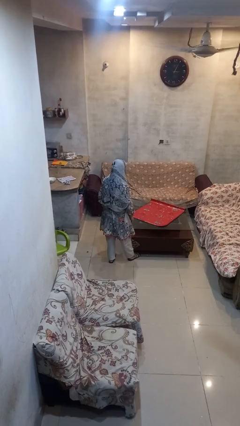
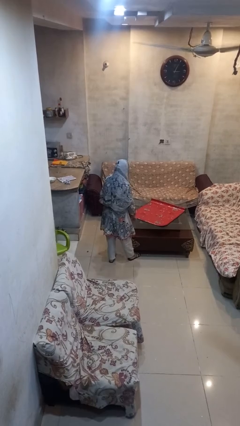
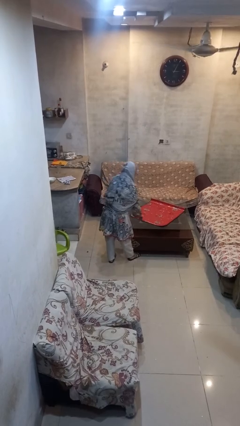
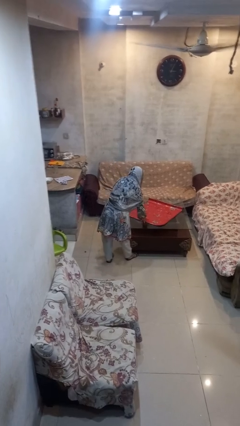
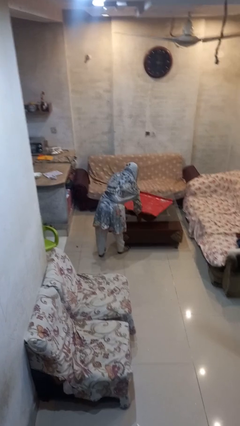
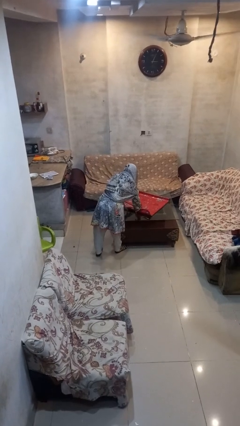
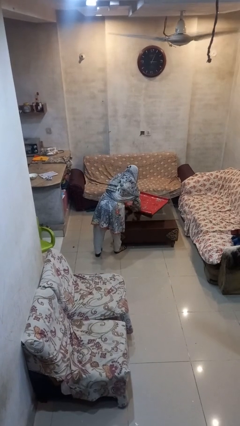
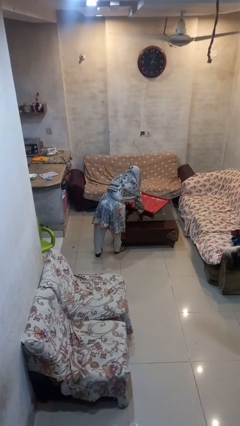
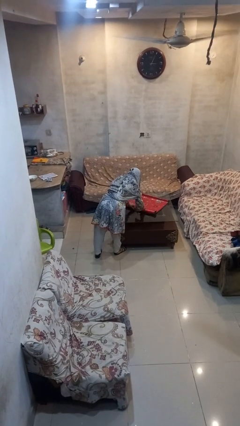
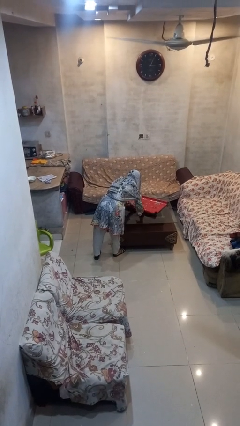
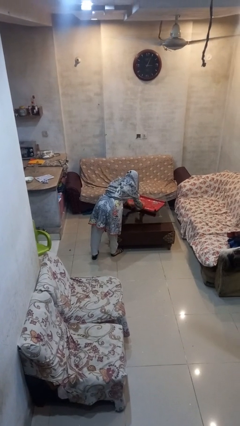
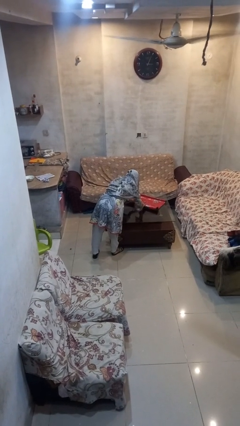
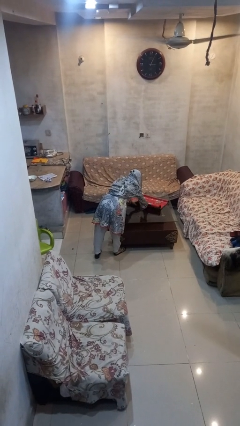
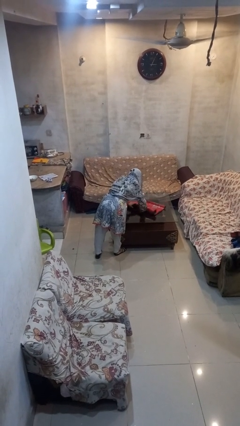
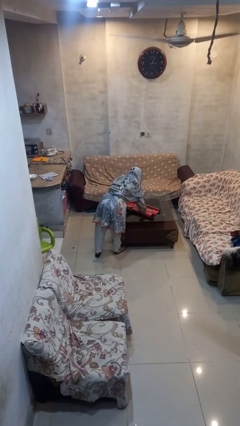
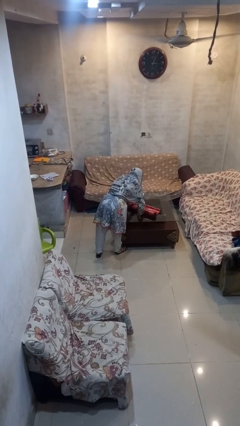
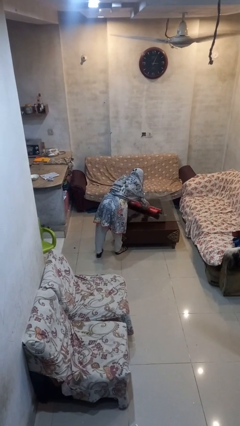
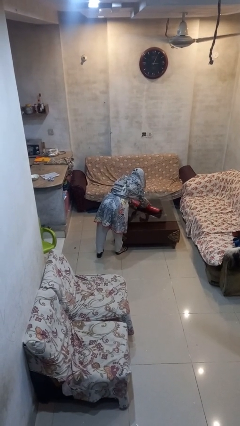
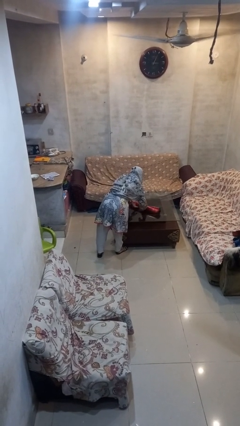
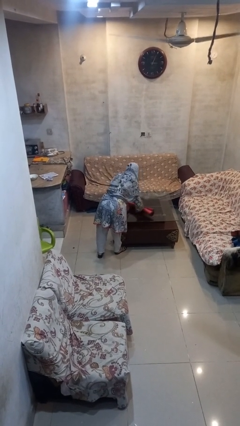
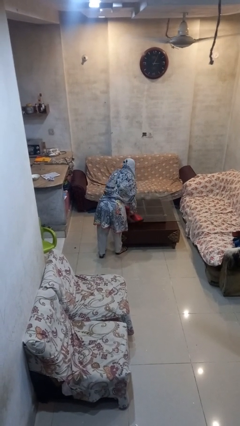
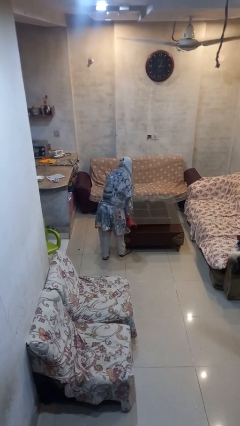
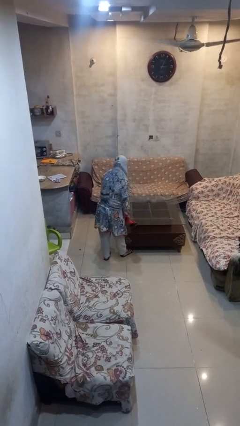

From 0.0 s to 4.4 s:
person folds tablecloth

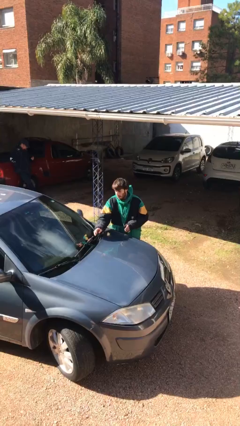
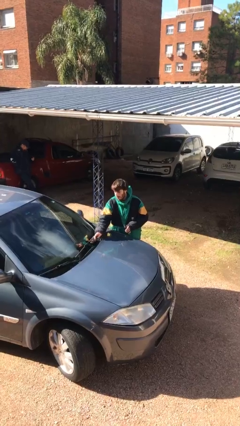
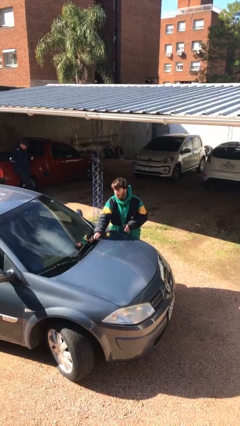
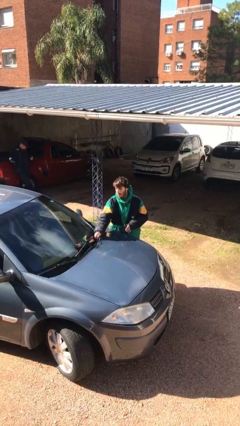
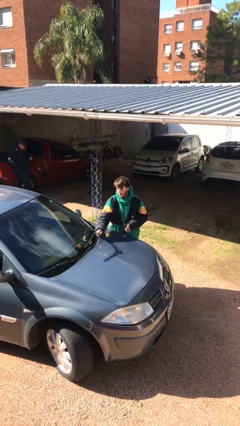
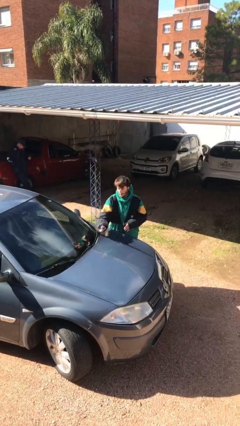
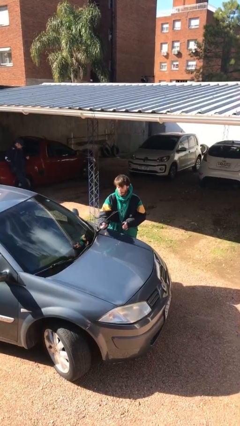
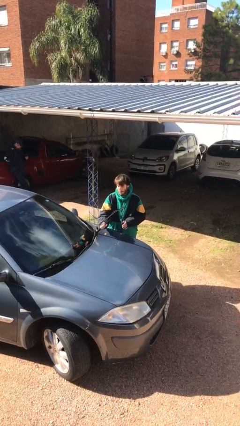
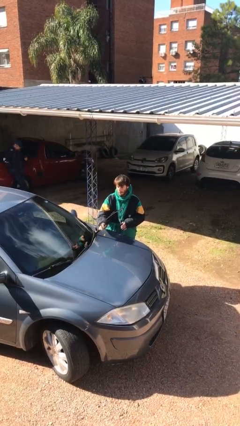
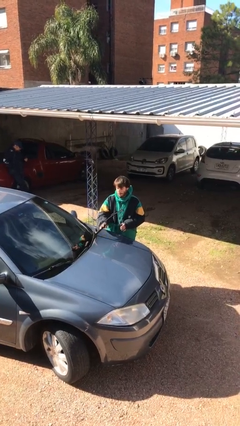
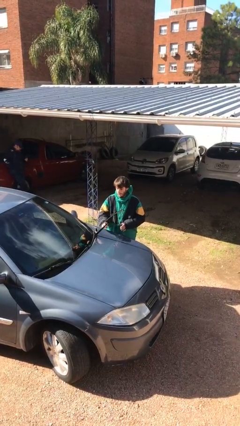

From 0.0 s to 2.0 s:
person flips up car wipers

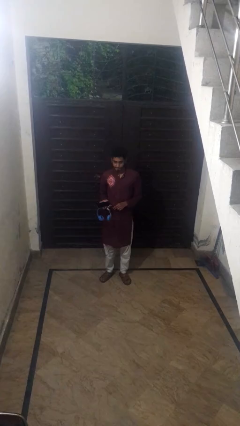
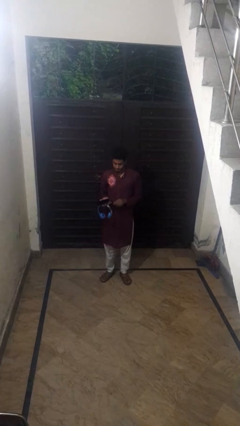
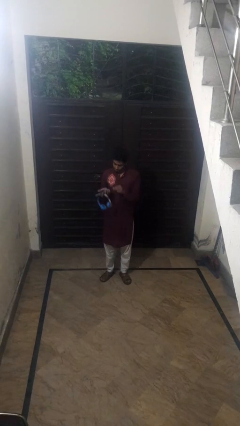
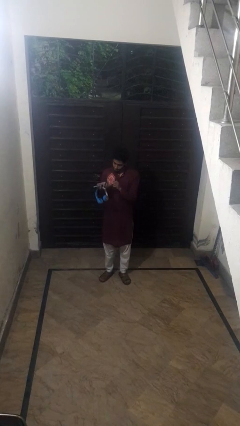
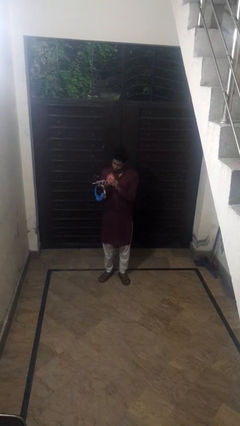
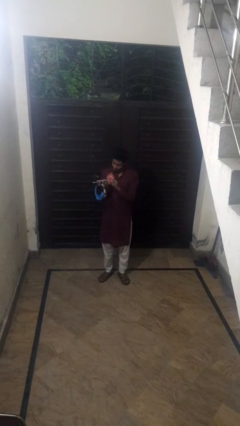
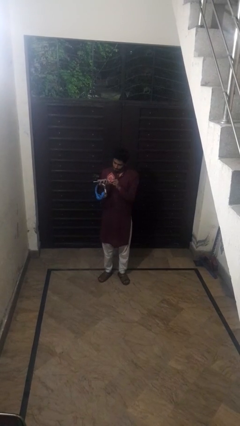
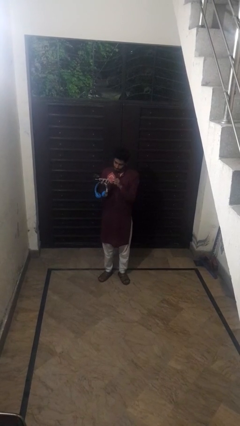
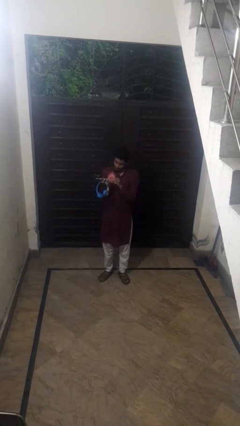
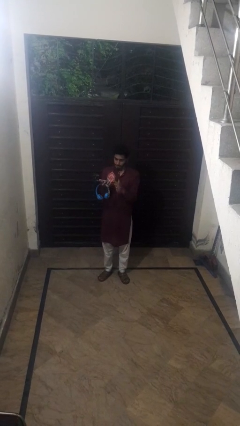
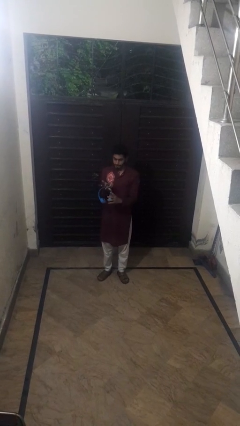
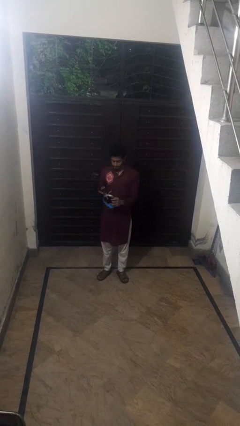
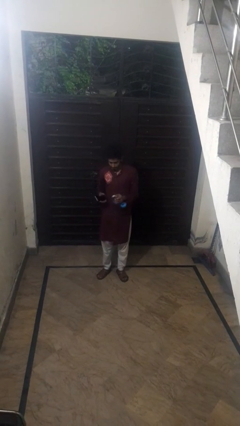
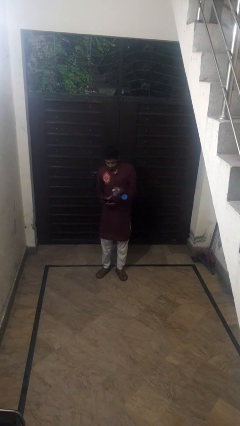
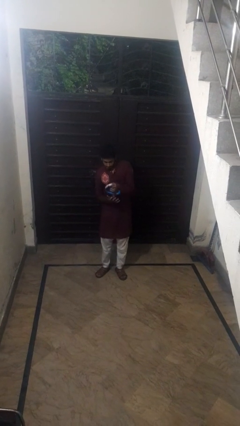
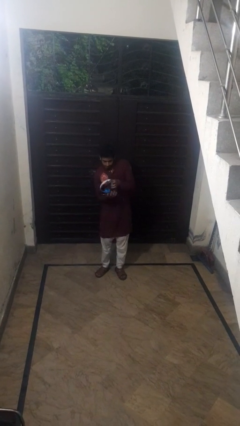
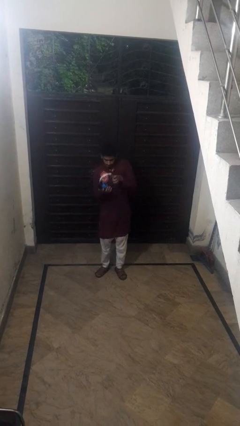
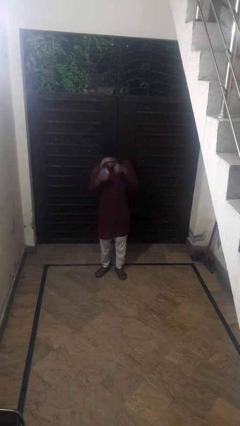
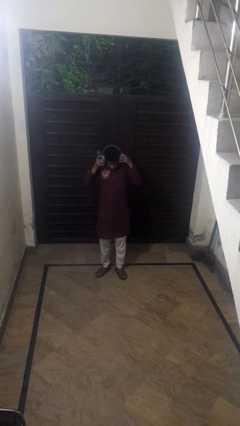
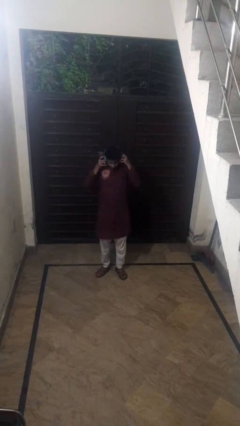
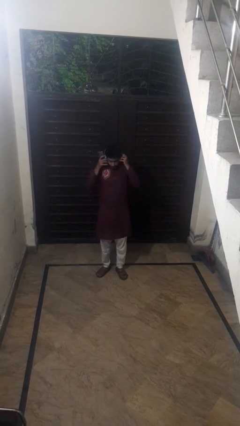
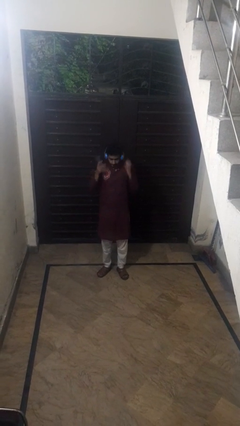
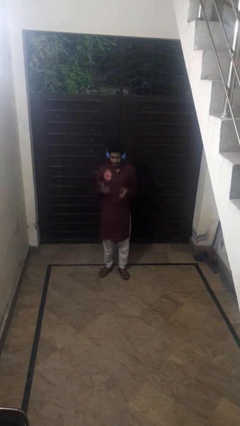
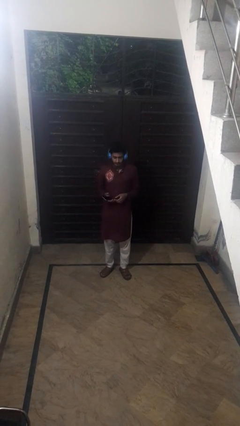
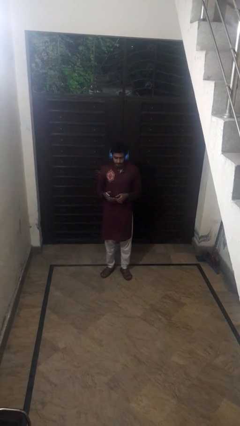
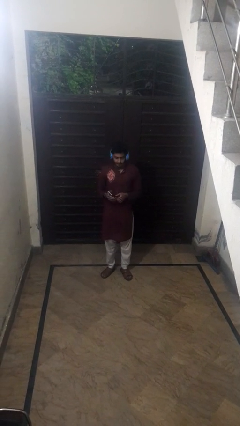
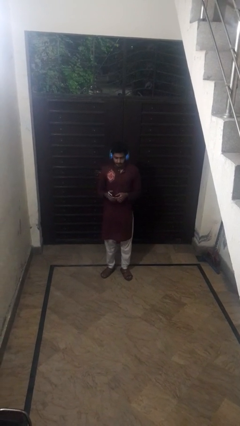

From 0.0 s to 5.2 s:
person puts on headphones

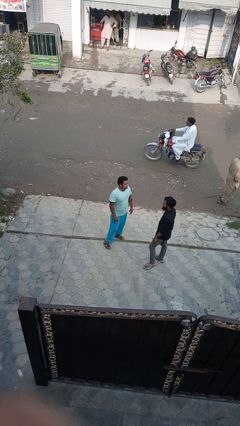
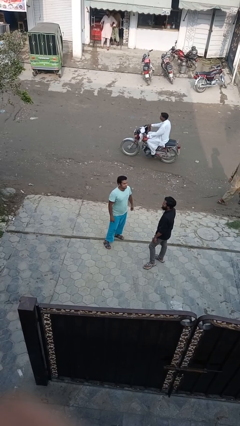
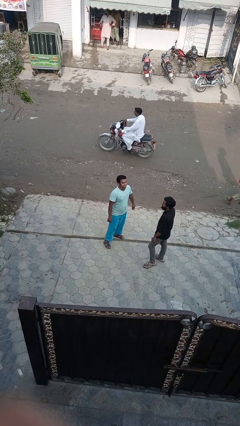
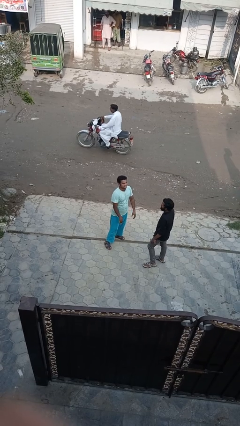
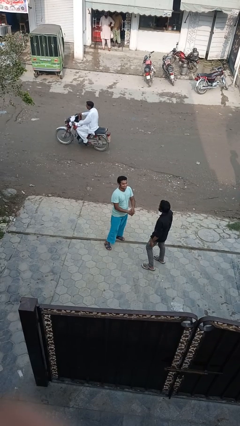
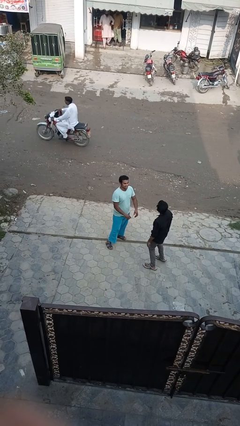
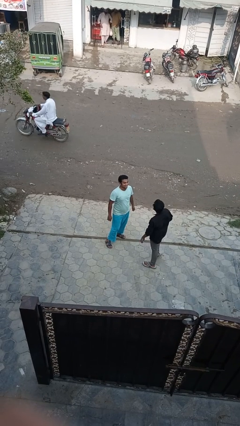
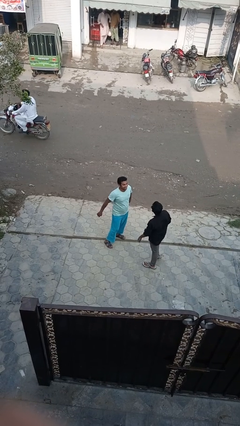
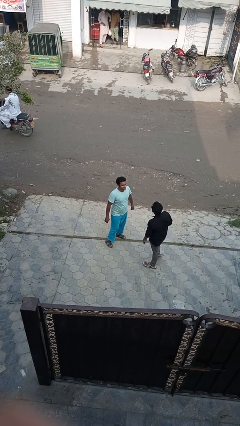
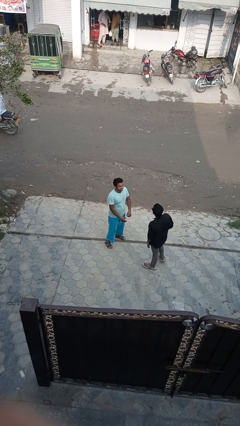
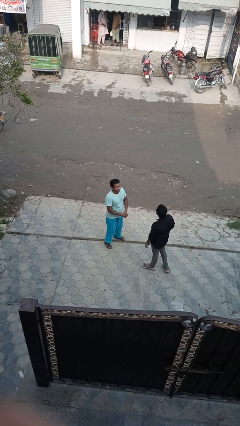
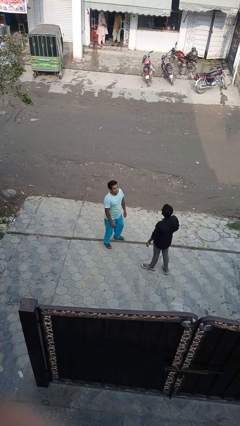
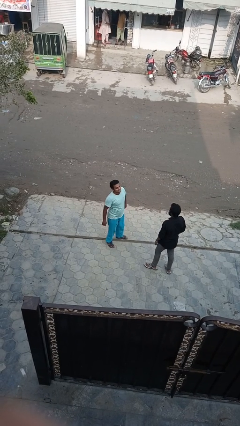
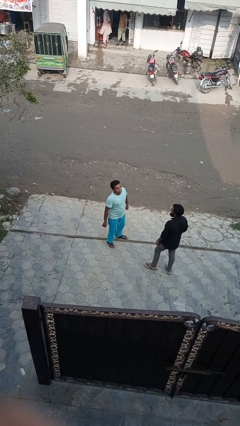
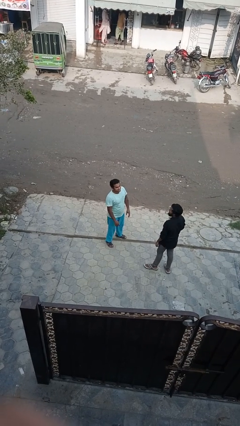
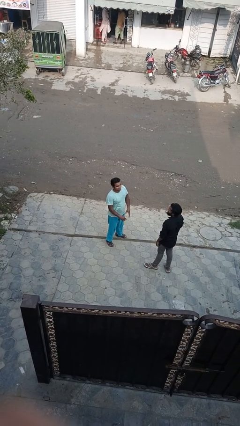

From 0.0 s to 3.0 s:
person laughs with person

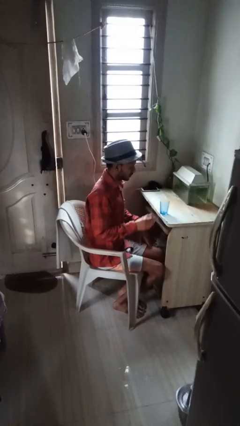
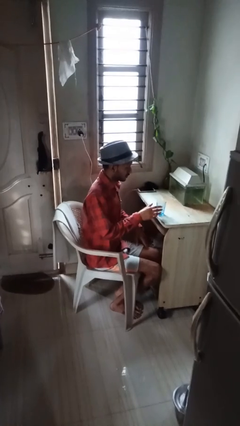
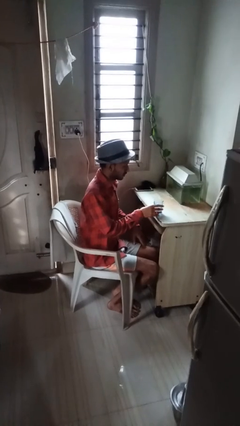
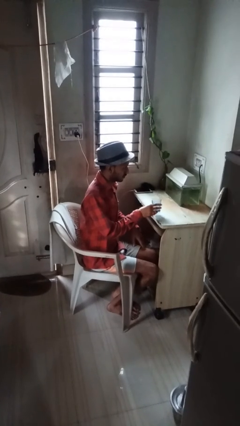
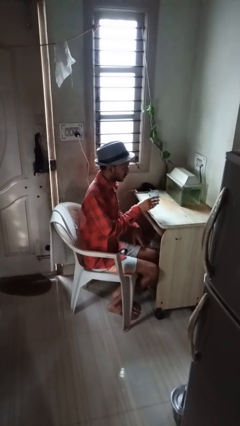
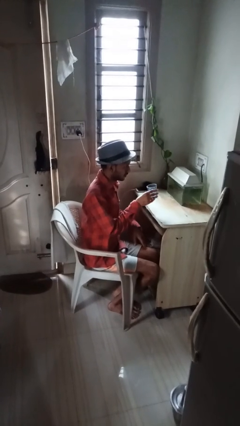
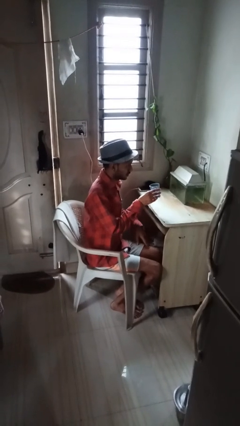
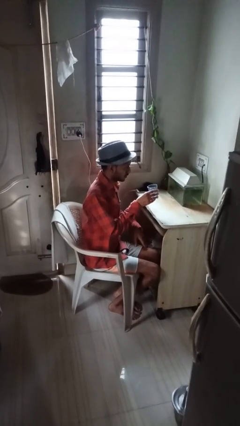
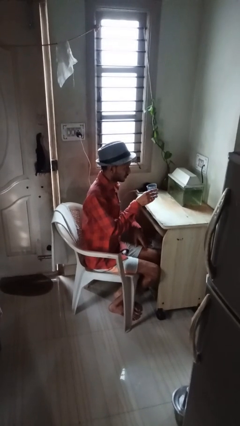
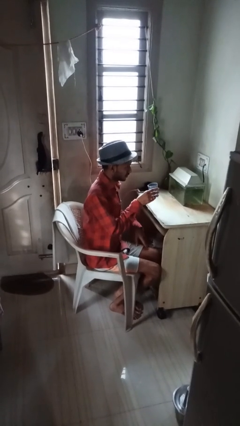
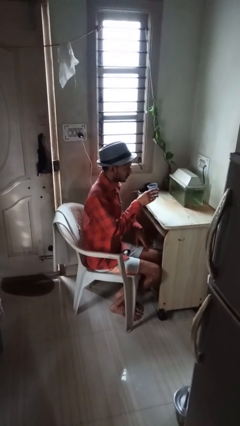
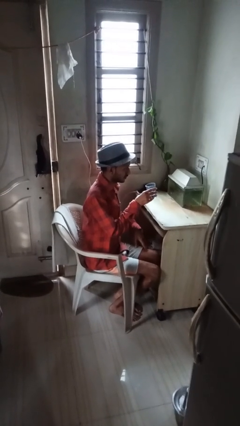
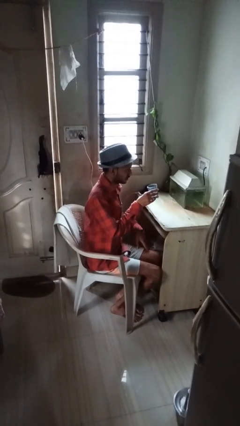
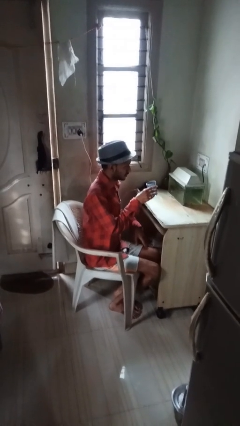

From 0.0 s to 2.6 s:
person picks up object from table

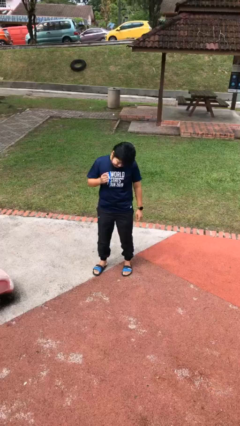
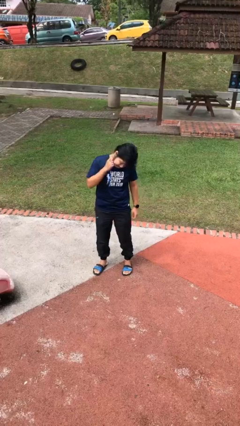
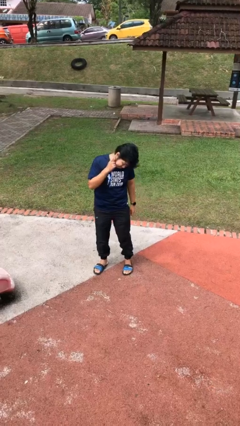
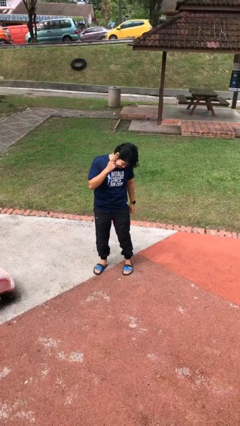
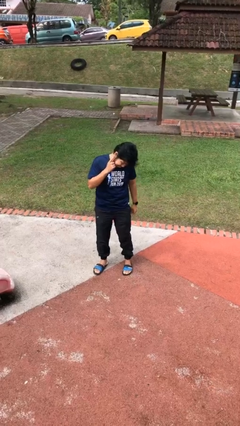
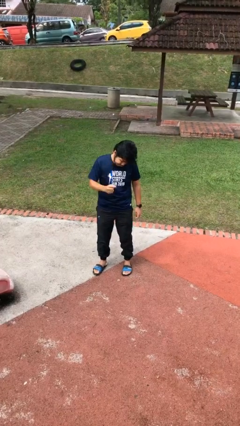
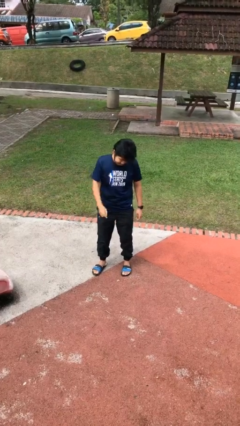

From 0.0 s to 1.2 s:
person gestures listen closely
